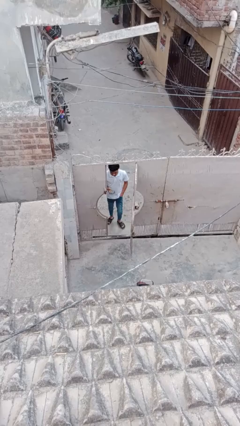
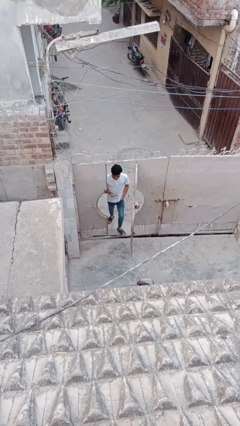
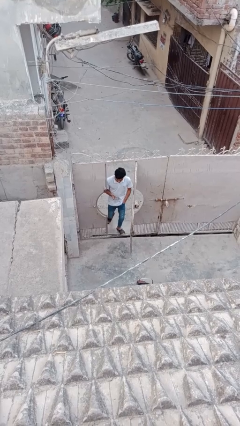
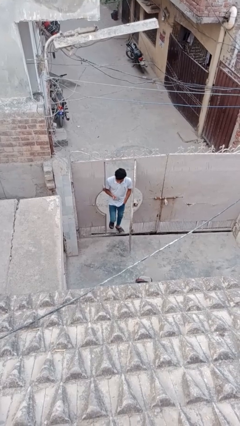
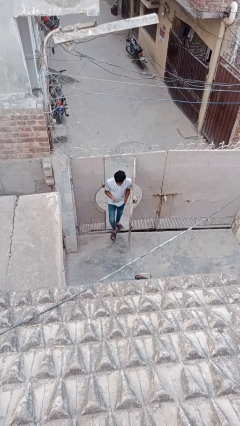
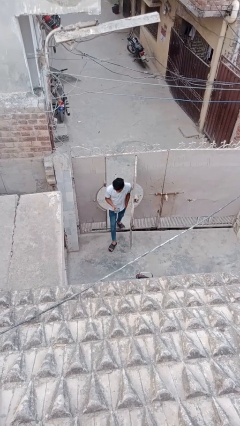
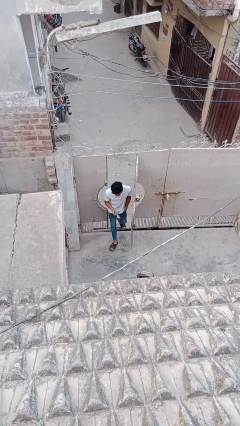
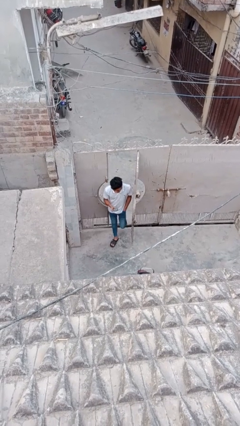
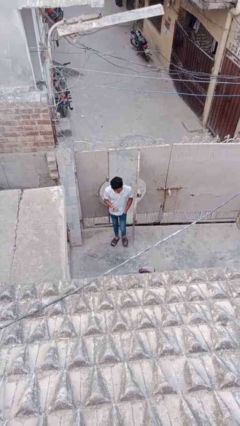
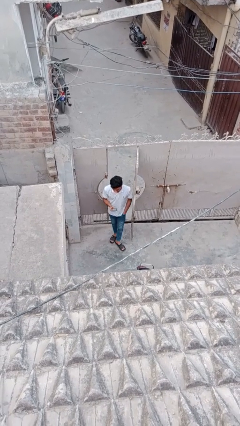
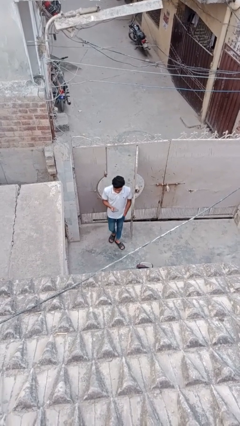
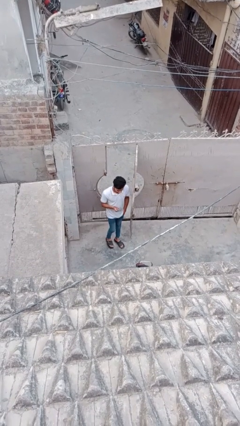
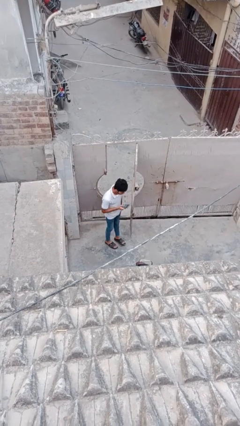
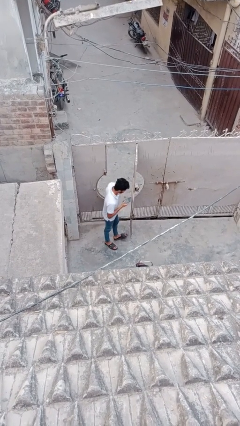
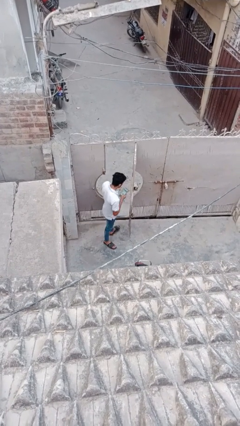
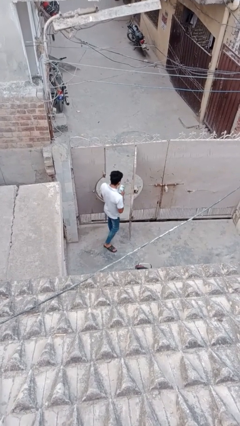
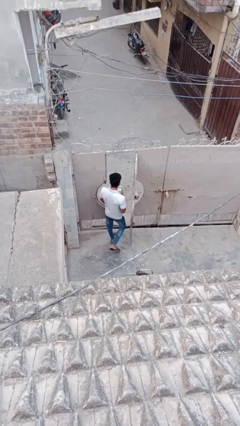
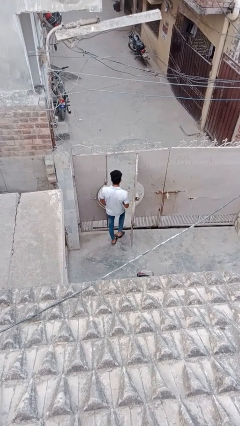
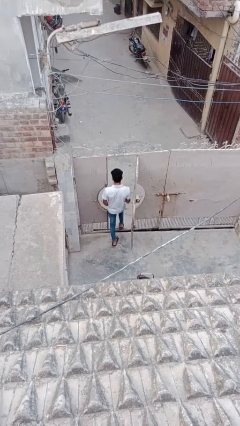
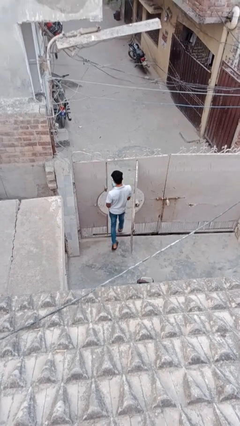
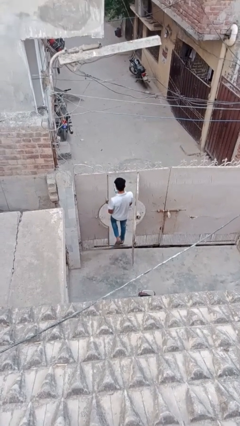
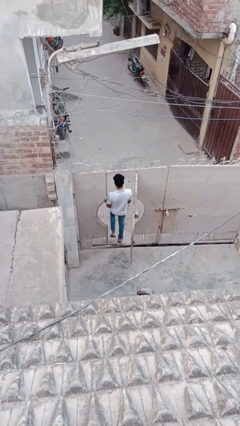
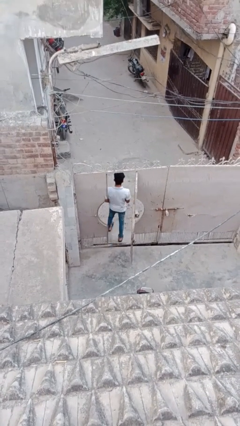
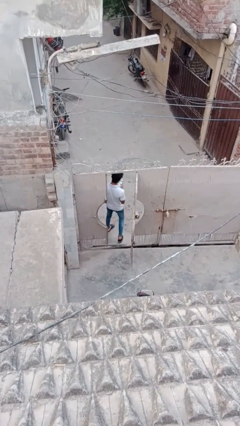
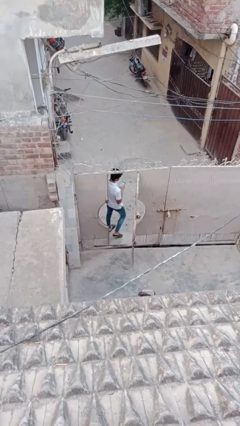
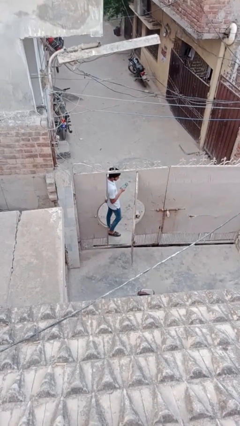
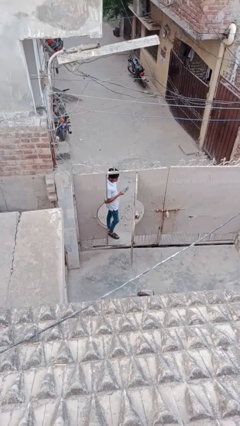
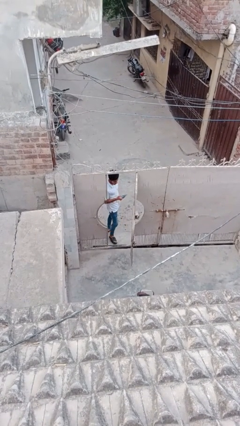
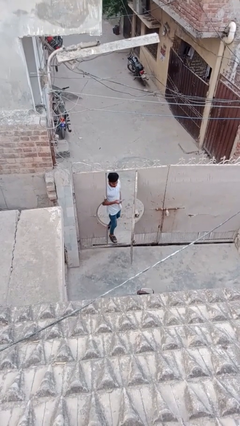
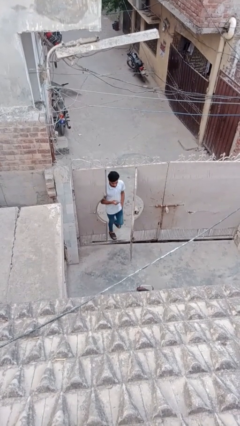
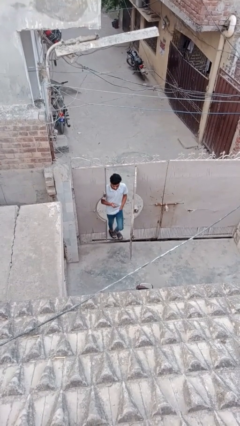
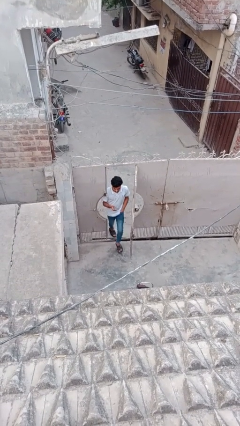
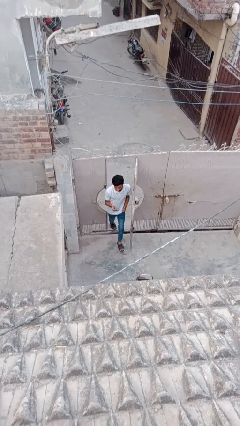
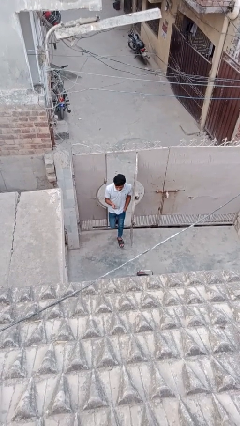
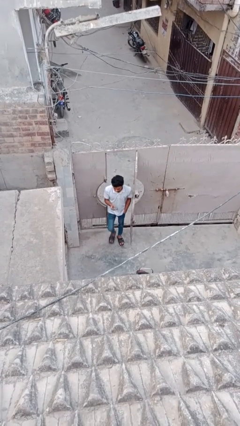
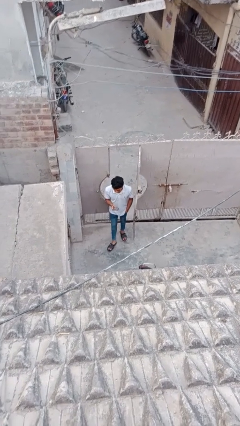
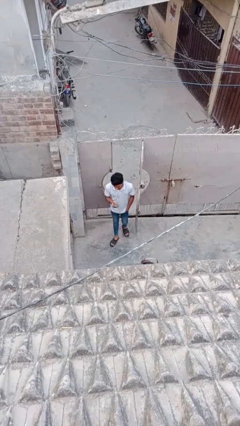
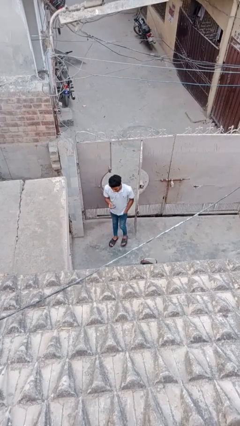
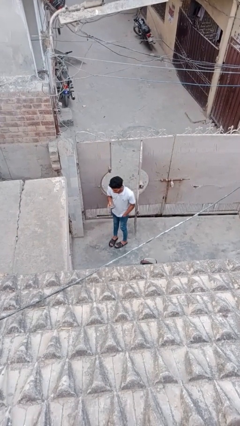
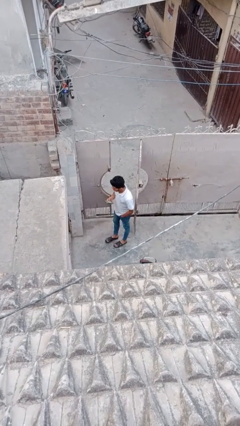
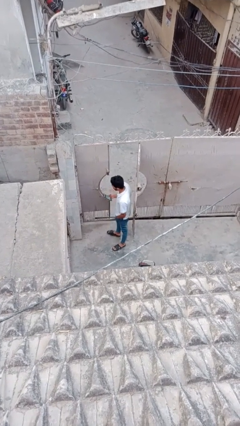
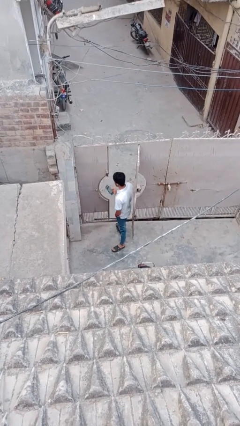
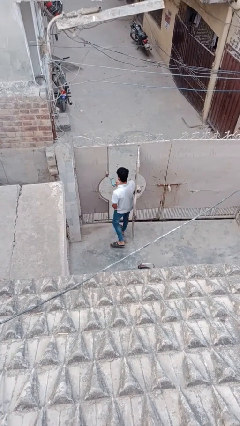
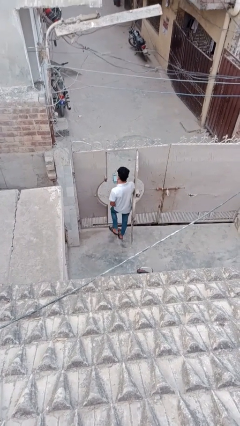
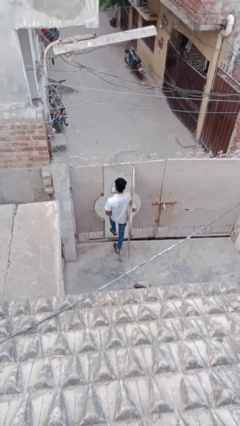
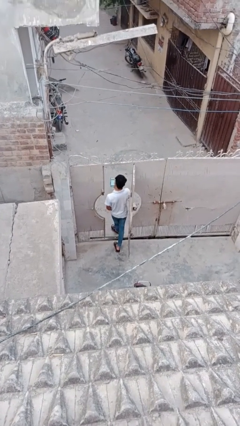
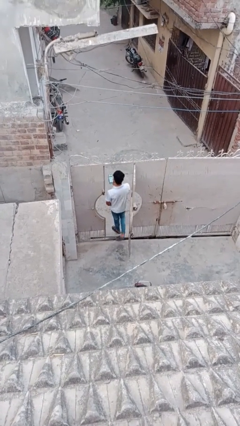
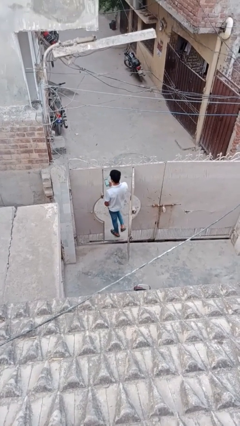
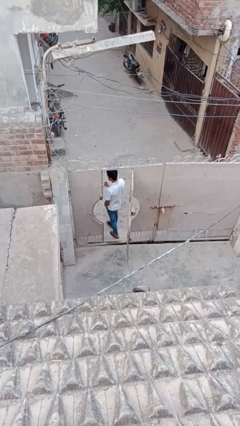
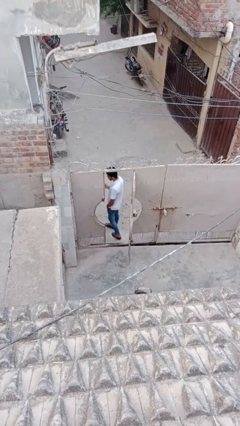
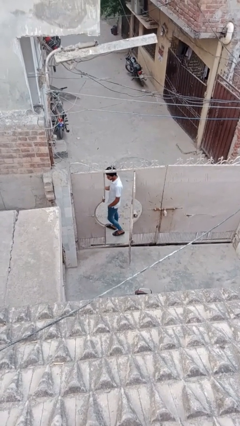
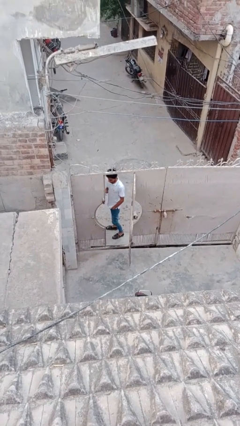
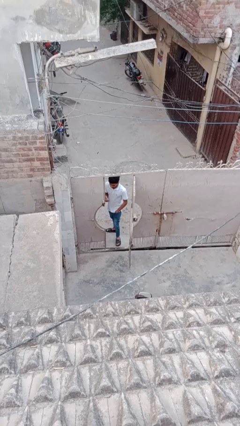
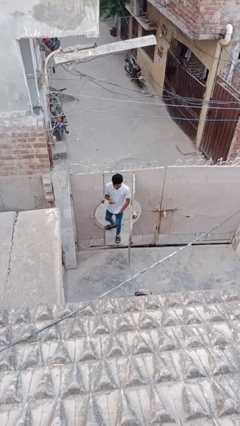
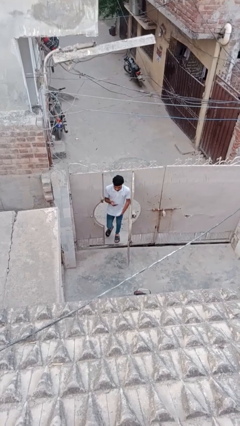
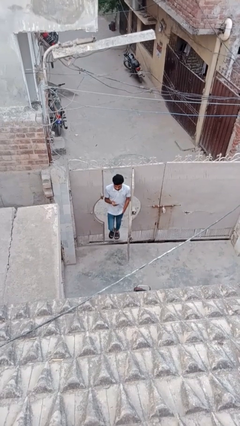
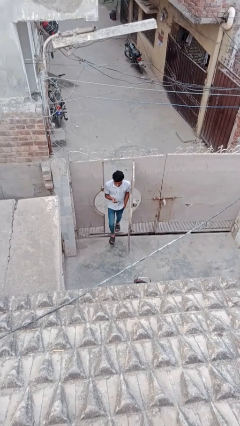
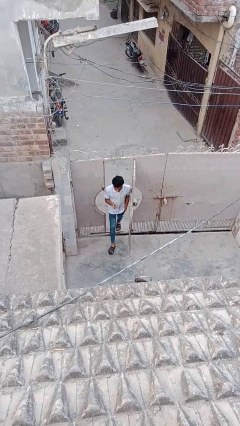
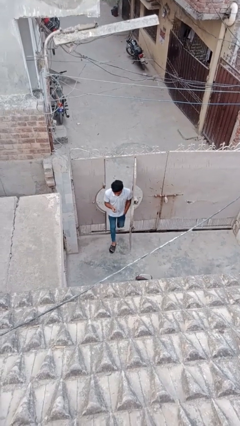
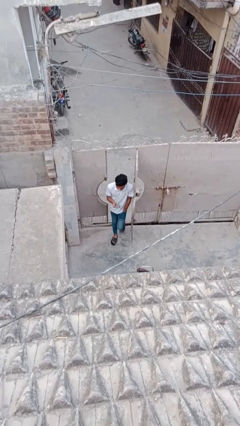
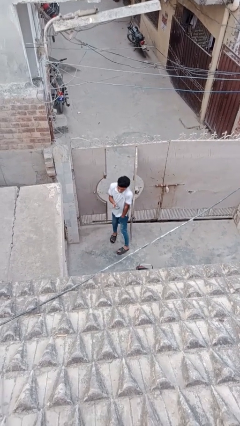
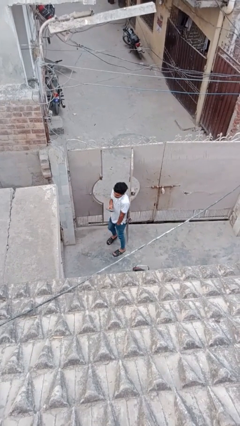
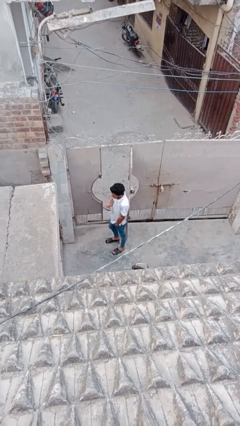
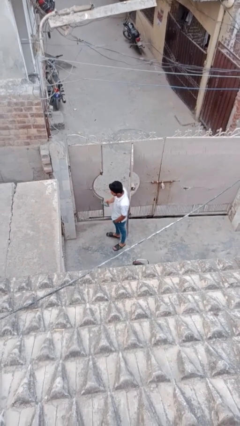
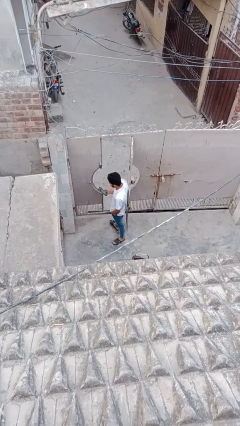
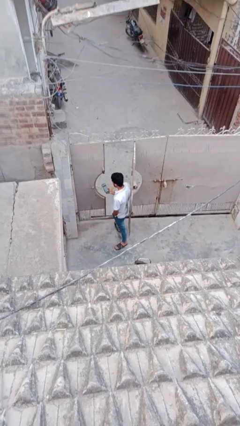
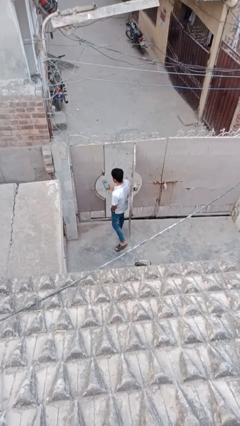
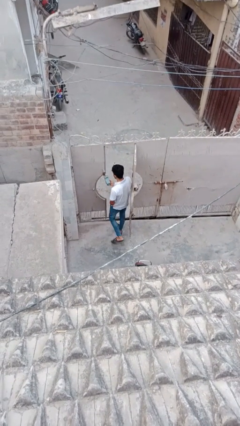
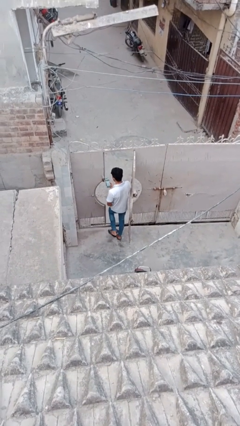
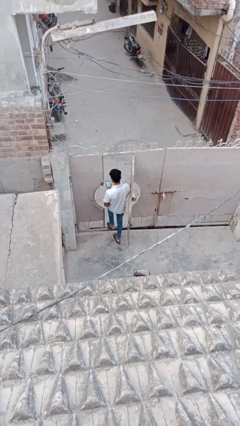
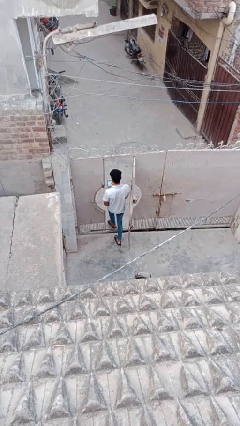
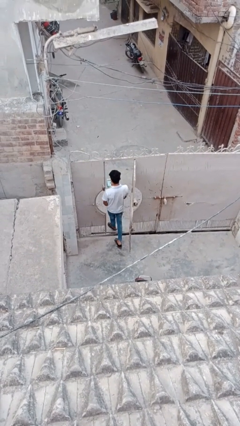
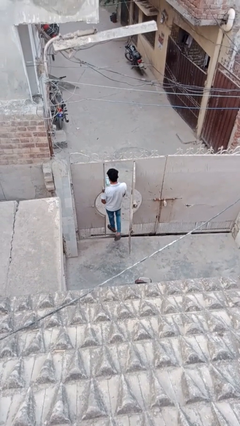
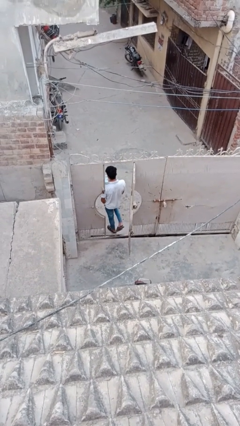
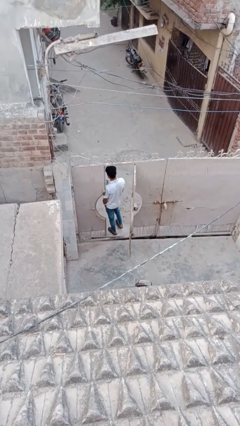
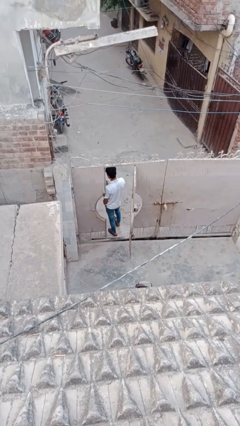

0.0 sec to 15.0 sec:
person texts on phone

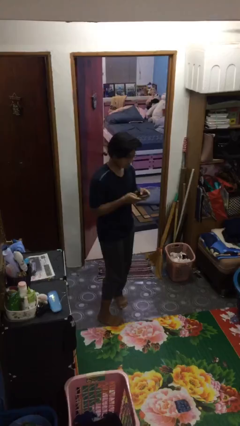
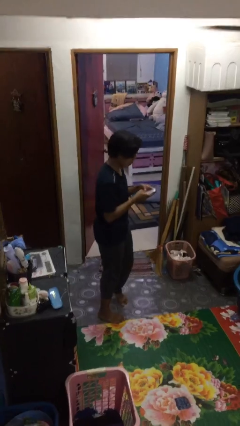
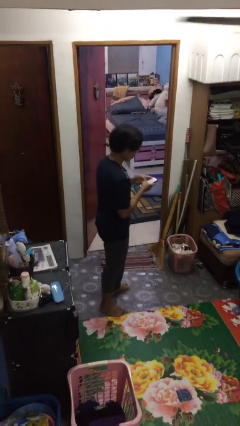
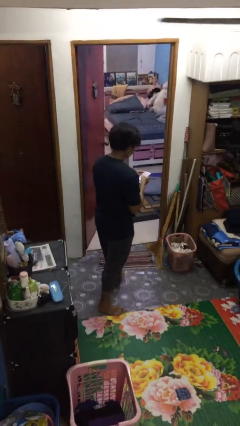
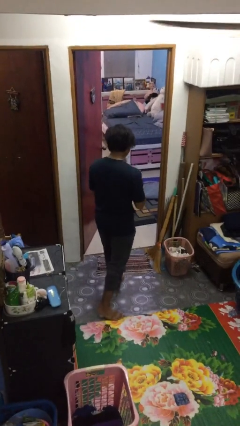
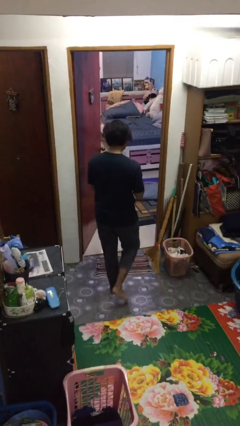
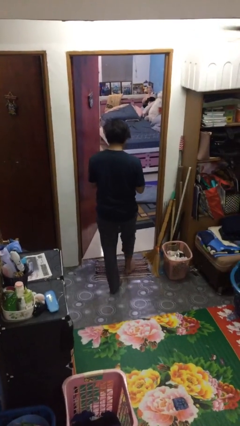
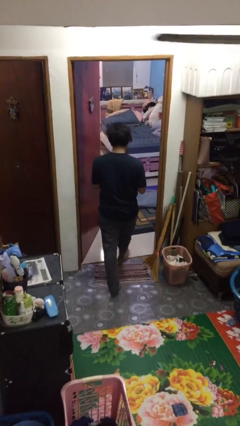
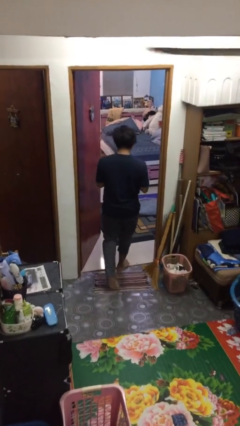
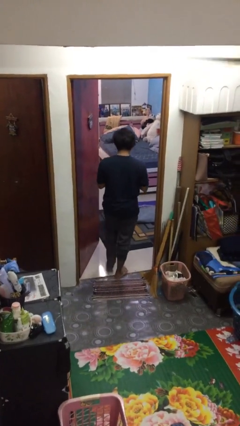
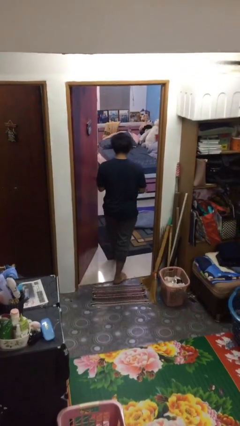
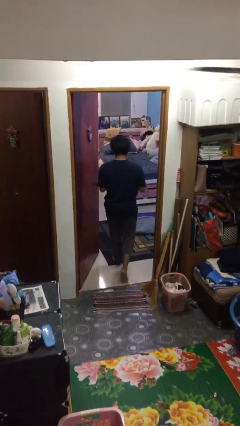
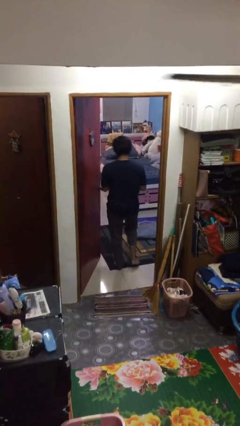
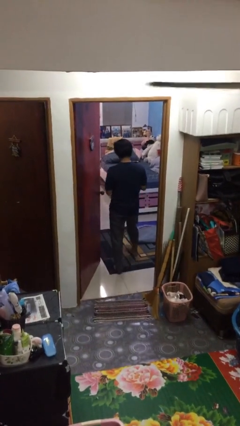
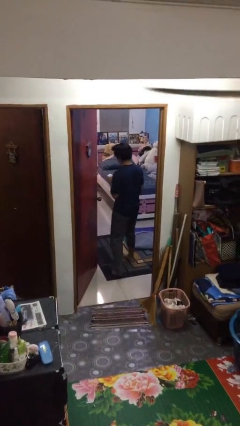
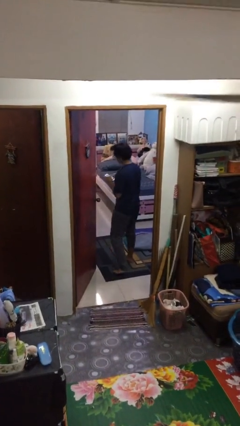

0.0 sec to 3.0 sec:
person exits scene through structure
